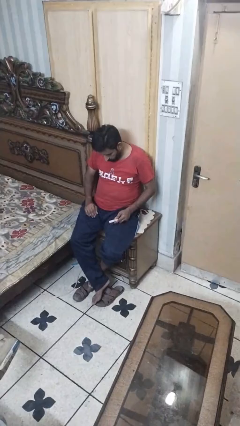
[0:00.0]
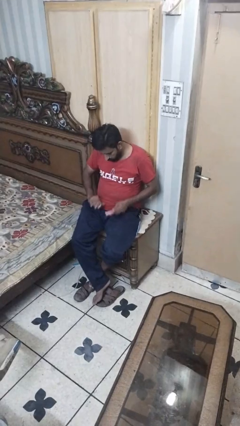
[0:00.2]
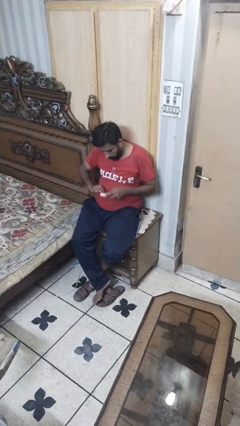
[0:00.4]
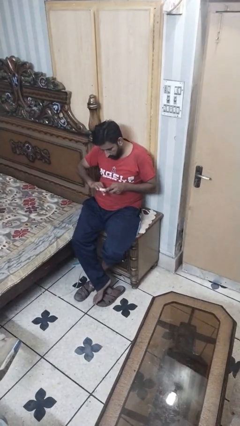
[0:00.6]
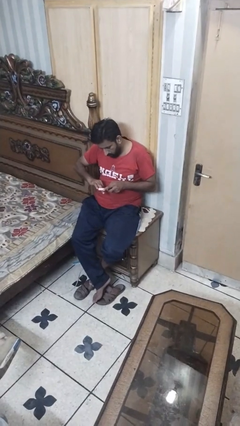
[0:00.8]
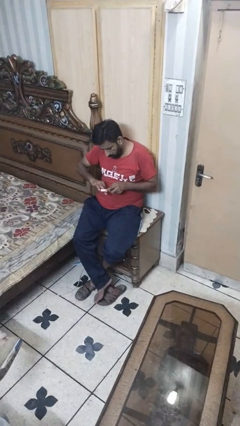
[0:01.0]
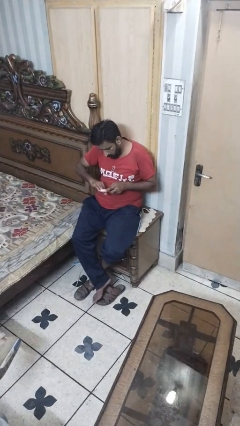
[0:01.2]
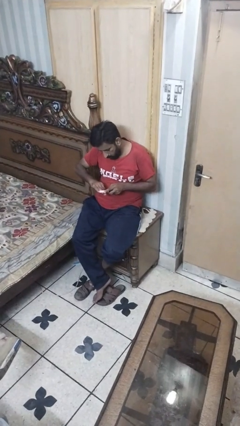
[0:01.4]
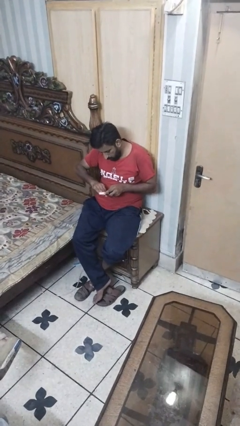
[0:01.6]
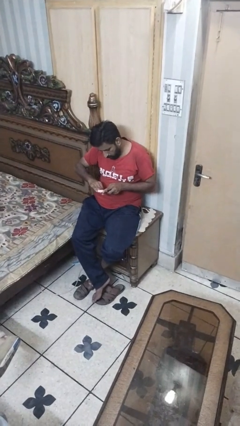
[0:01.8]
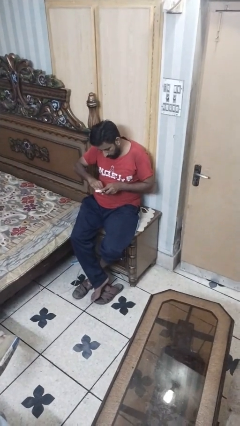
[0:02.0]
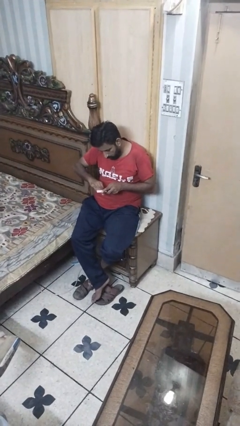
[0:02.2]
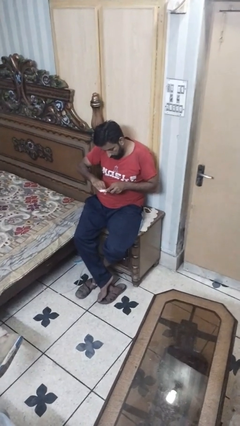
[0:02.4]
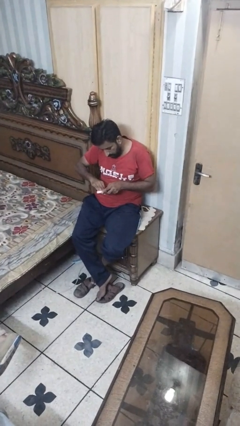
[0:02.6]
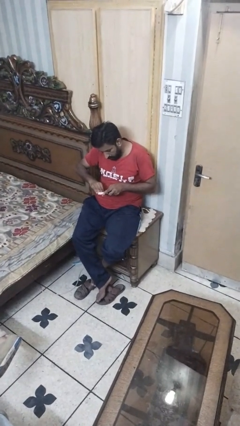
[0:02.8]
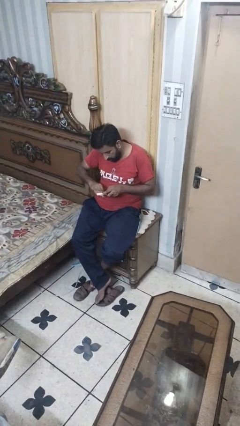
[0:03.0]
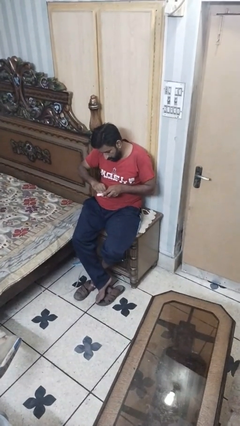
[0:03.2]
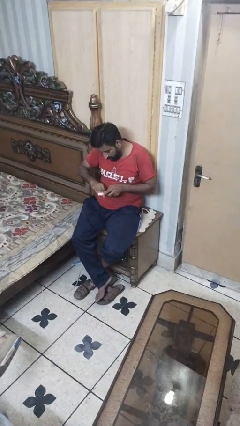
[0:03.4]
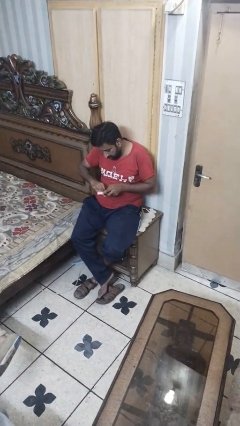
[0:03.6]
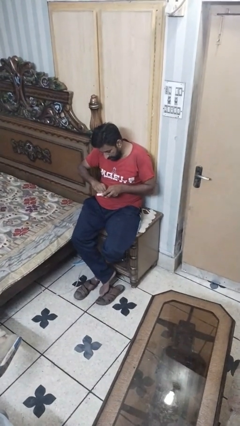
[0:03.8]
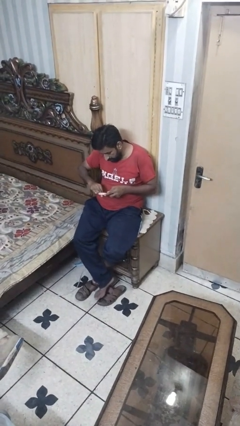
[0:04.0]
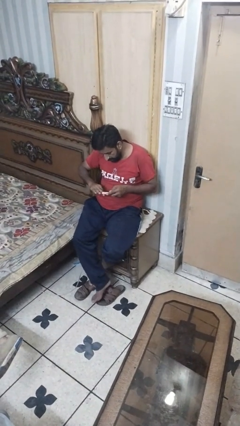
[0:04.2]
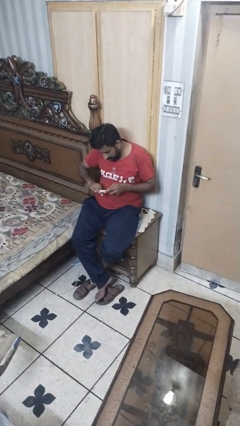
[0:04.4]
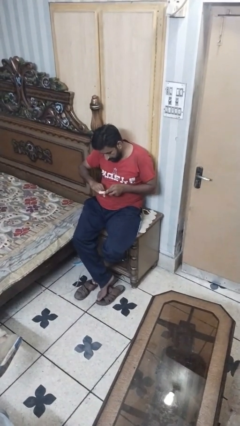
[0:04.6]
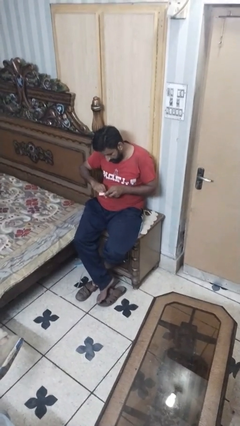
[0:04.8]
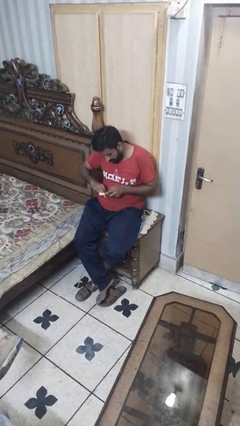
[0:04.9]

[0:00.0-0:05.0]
person files fingernails

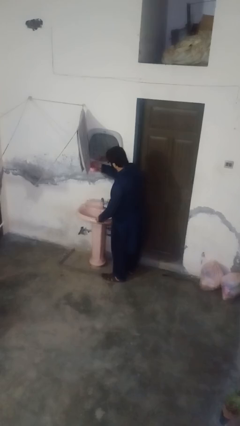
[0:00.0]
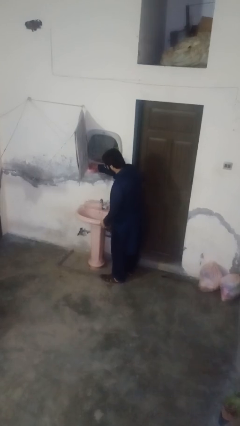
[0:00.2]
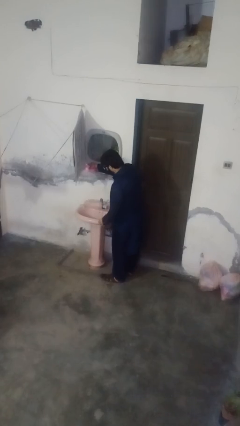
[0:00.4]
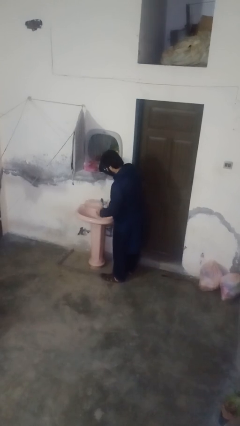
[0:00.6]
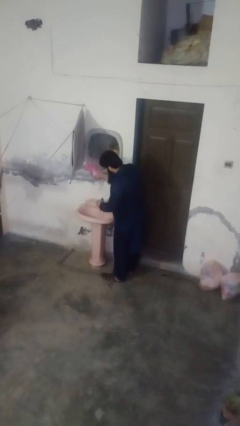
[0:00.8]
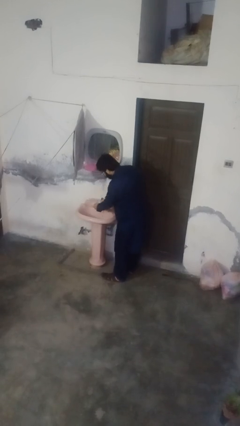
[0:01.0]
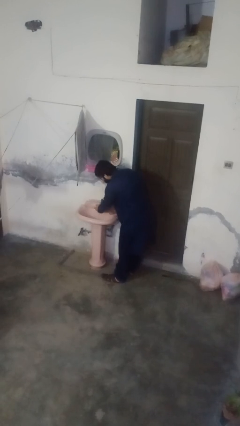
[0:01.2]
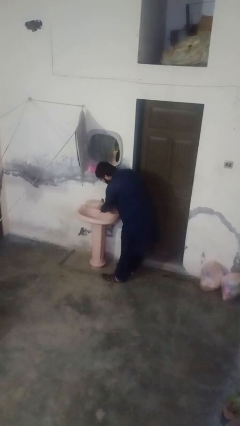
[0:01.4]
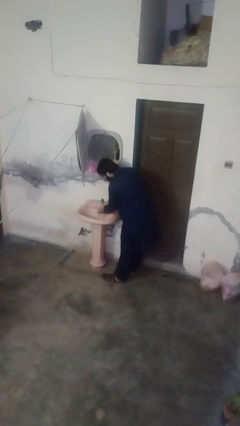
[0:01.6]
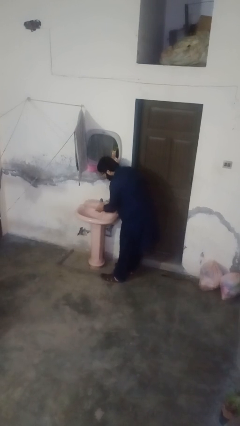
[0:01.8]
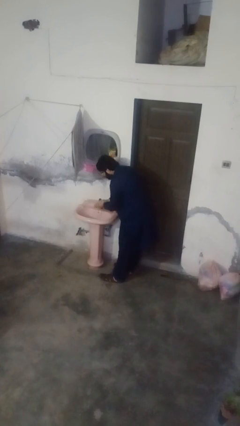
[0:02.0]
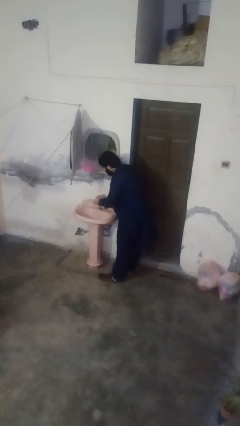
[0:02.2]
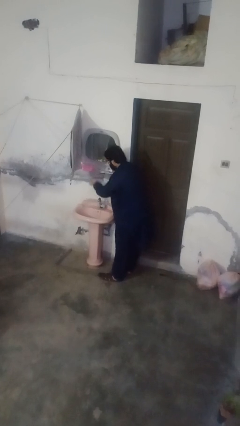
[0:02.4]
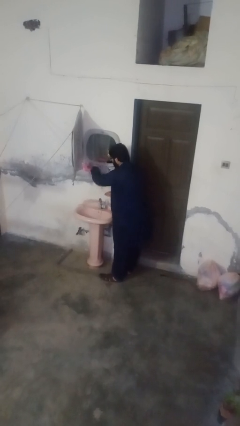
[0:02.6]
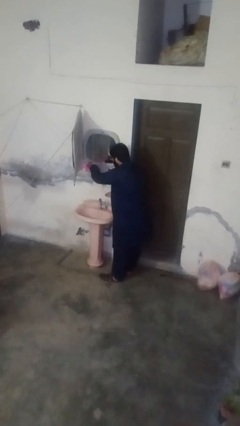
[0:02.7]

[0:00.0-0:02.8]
person washes hands

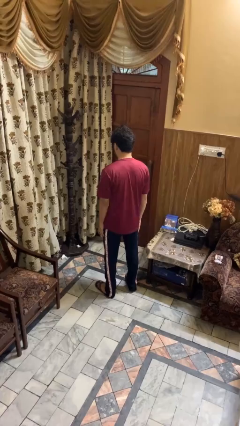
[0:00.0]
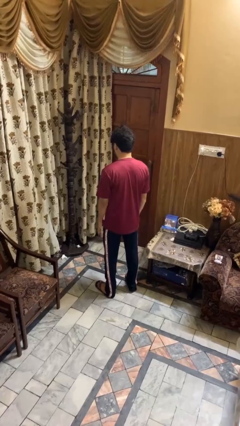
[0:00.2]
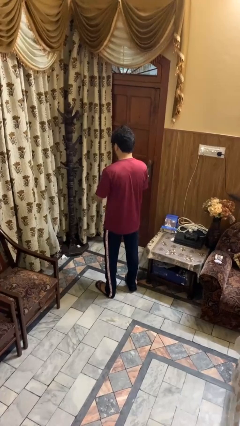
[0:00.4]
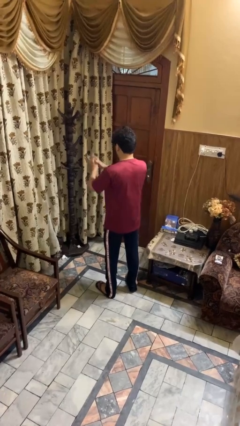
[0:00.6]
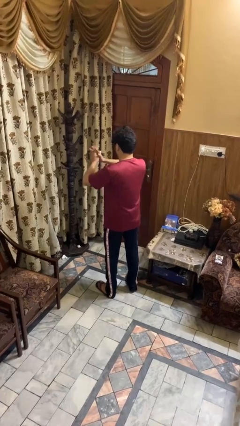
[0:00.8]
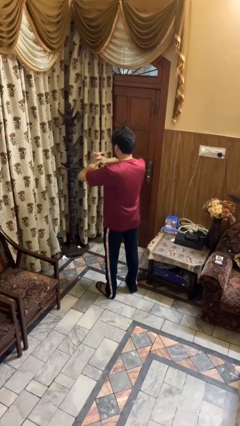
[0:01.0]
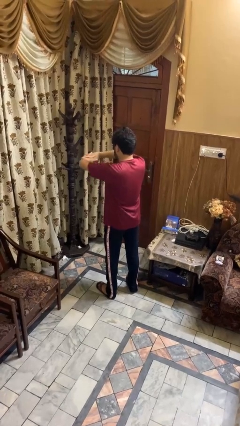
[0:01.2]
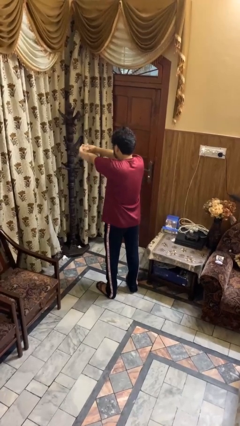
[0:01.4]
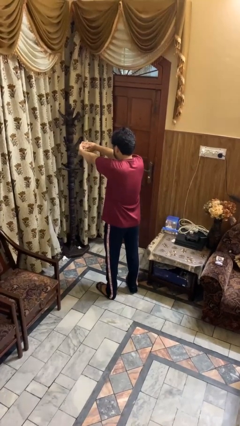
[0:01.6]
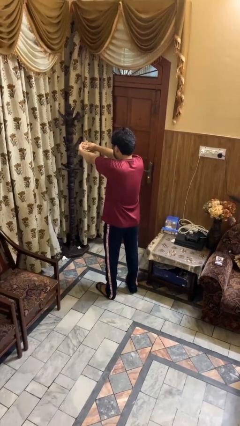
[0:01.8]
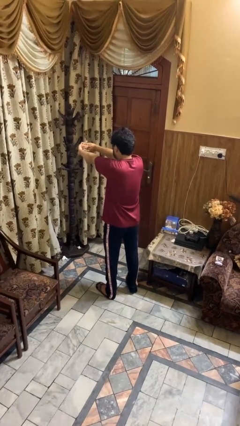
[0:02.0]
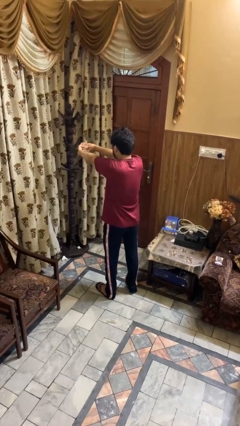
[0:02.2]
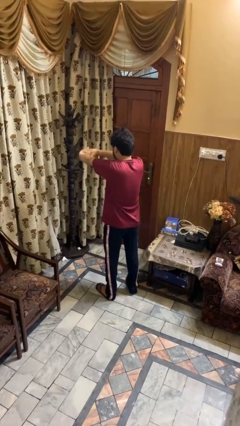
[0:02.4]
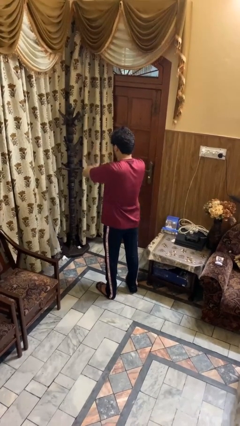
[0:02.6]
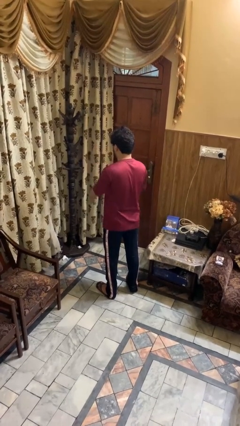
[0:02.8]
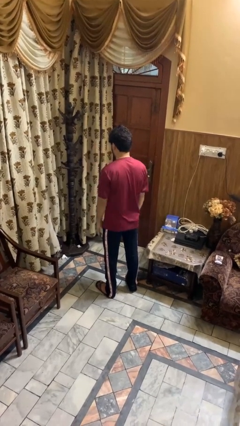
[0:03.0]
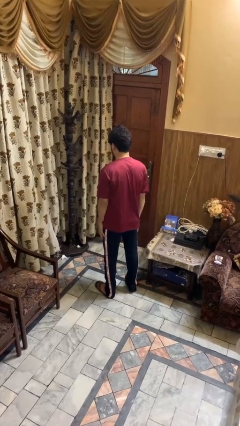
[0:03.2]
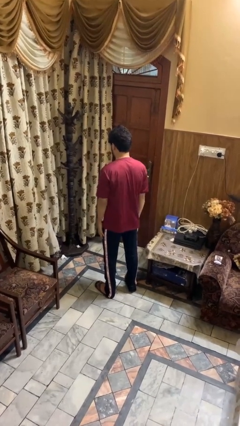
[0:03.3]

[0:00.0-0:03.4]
person cracks knuckles

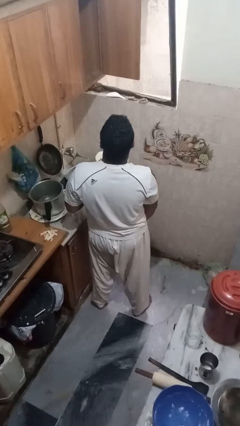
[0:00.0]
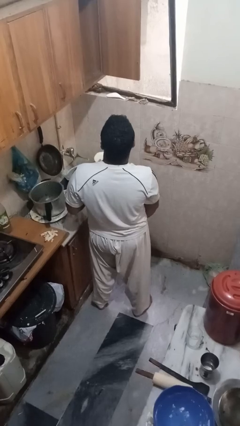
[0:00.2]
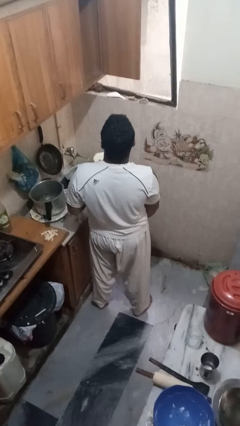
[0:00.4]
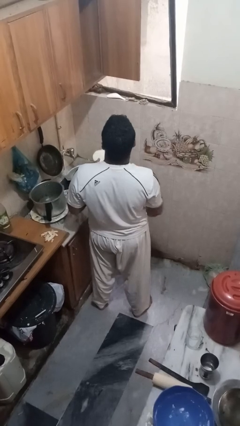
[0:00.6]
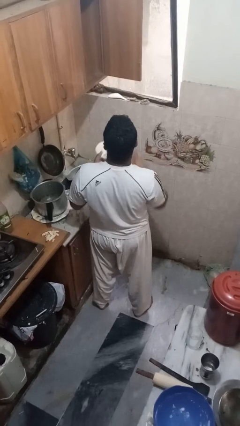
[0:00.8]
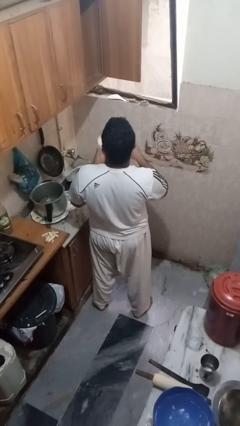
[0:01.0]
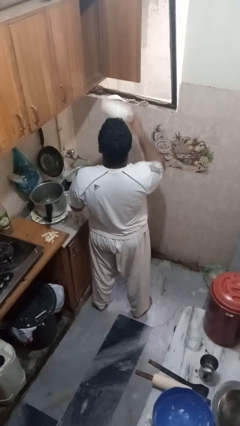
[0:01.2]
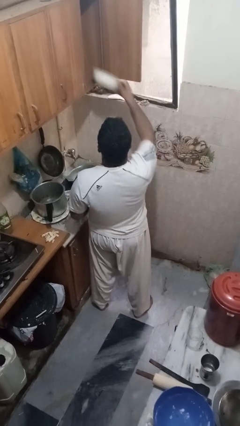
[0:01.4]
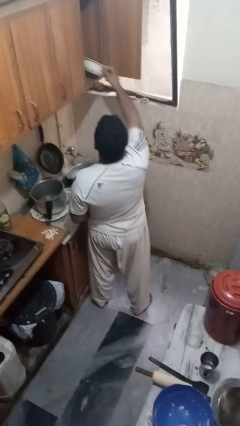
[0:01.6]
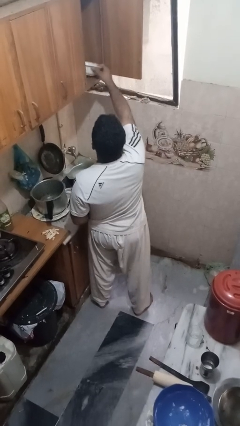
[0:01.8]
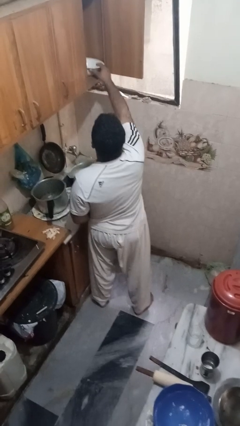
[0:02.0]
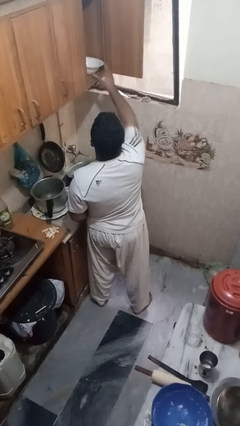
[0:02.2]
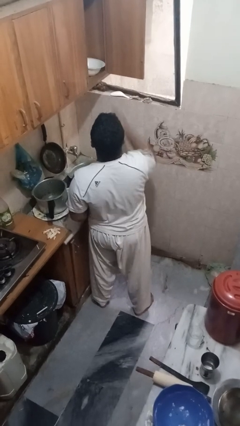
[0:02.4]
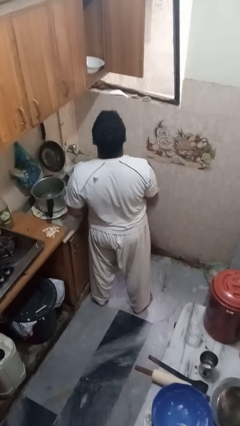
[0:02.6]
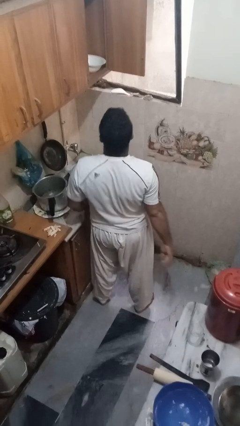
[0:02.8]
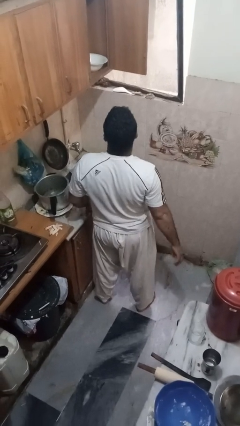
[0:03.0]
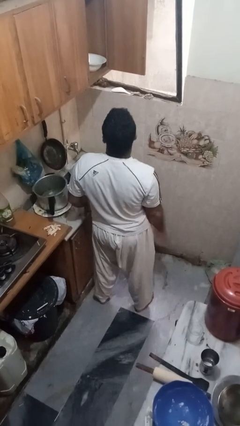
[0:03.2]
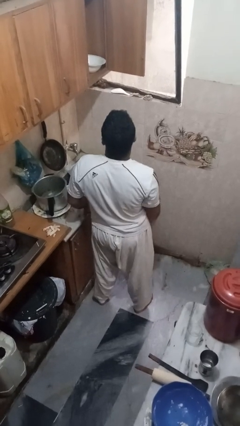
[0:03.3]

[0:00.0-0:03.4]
person puts object in cabinet

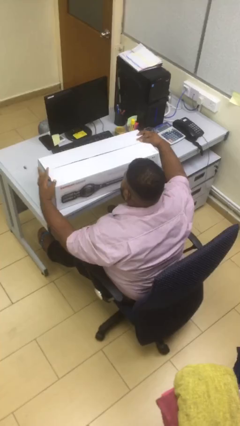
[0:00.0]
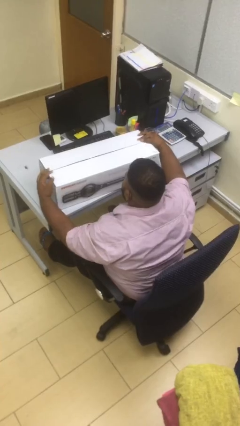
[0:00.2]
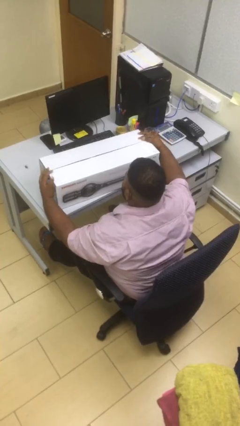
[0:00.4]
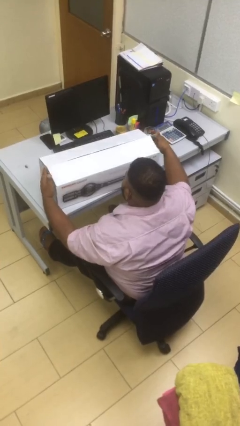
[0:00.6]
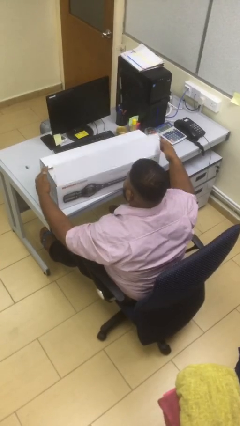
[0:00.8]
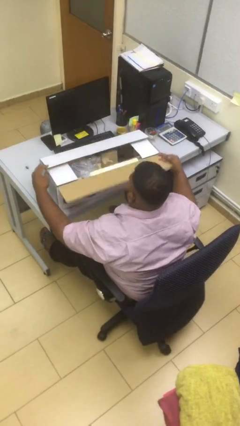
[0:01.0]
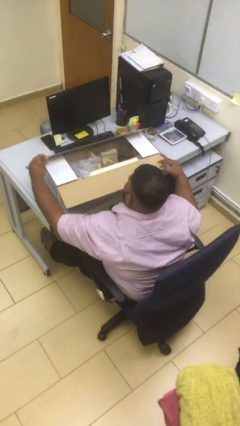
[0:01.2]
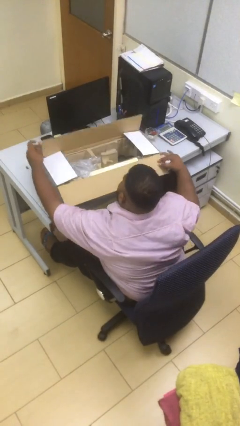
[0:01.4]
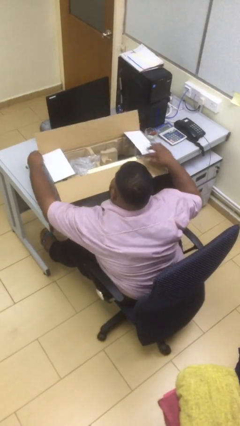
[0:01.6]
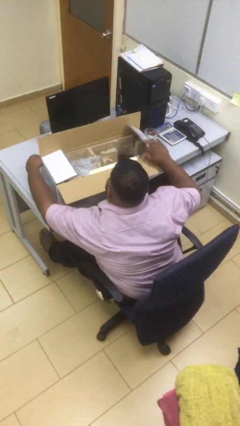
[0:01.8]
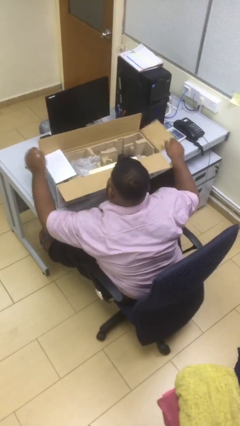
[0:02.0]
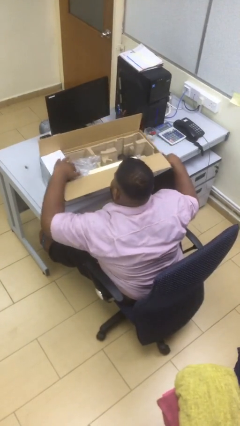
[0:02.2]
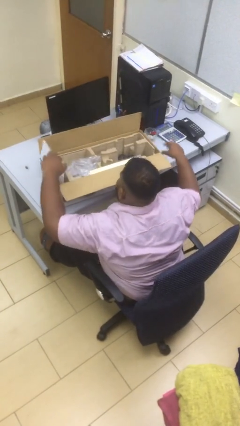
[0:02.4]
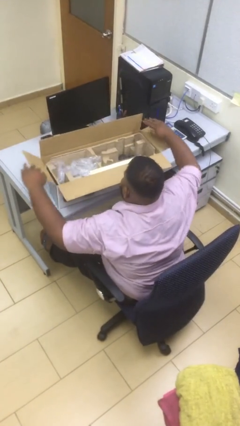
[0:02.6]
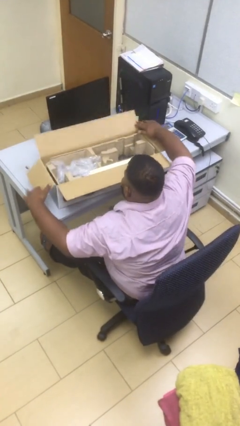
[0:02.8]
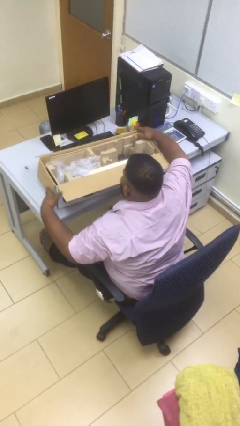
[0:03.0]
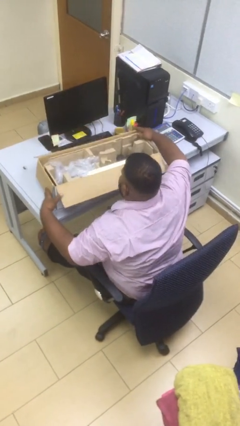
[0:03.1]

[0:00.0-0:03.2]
person opens box
